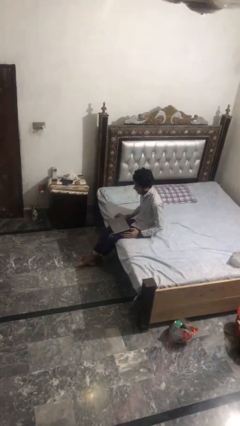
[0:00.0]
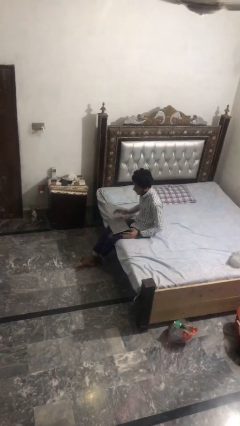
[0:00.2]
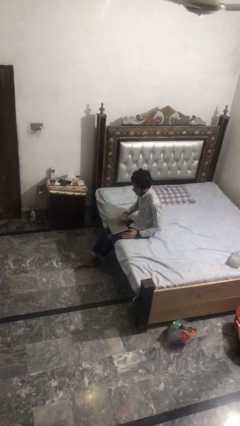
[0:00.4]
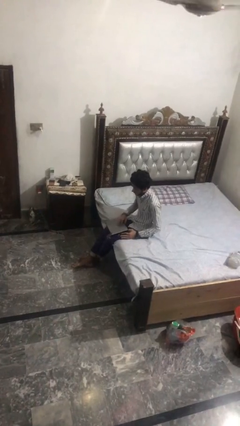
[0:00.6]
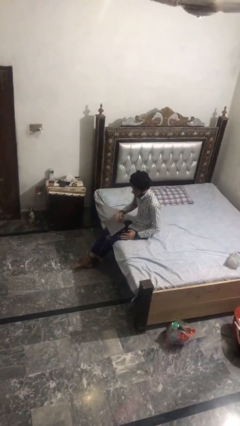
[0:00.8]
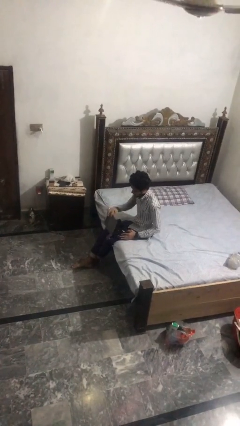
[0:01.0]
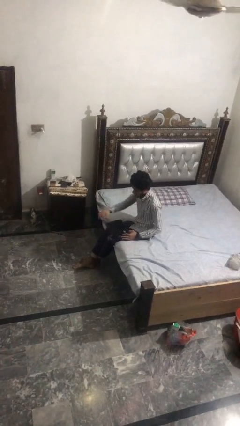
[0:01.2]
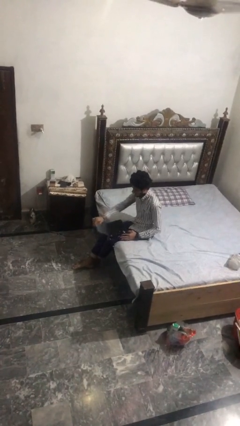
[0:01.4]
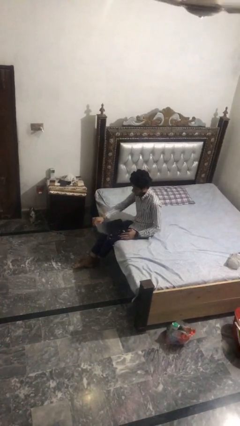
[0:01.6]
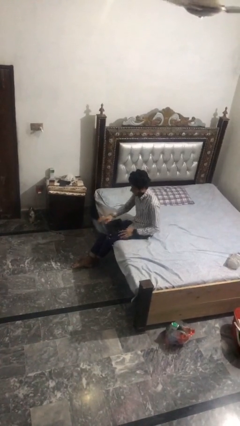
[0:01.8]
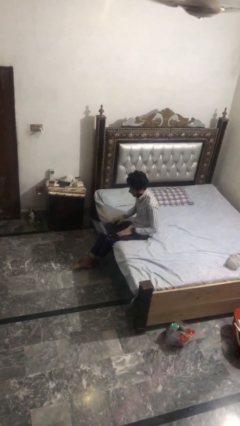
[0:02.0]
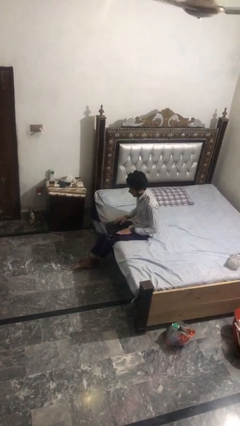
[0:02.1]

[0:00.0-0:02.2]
person opens laptop

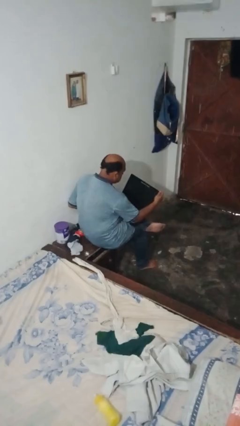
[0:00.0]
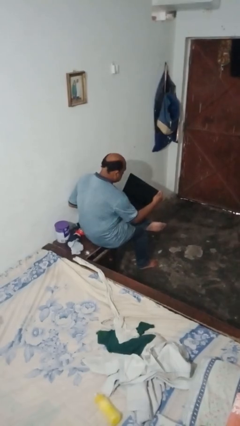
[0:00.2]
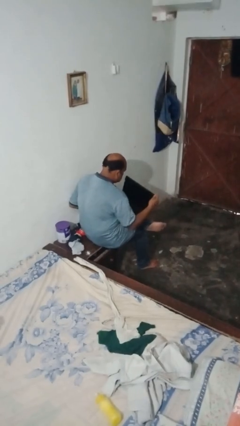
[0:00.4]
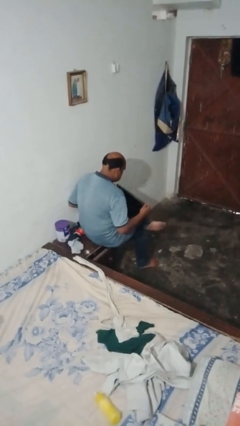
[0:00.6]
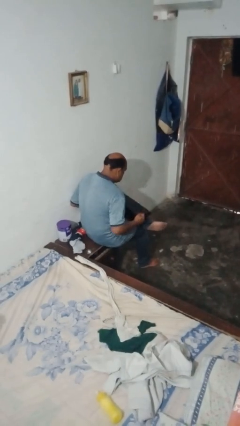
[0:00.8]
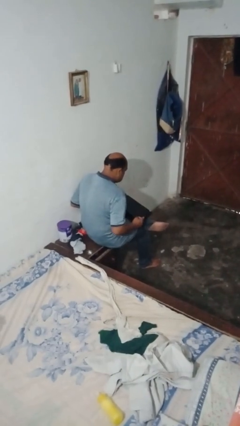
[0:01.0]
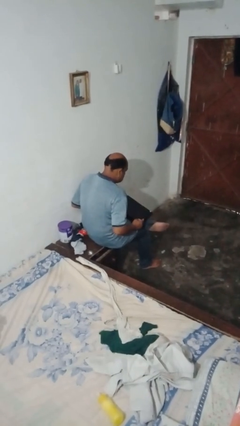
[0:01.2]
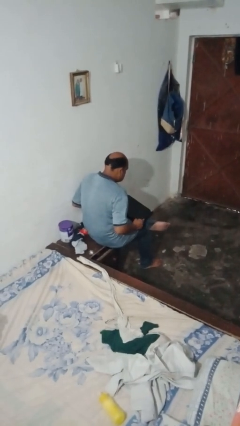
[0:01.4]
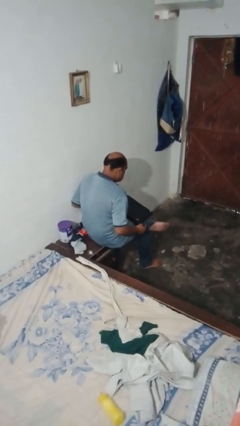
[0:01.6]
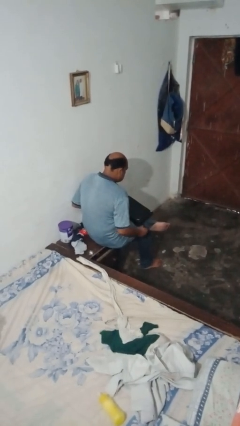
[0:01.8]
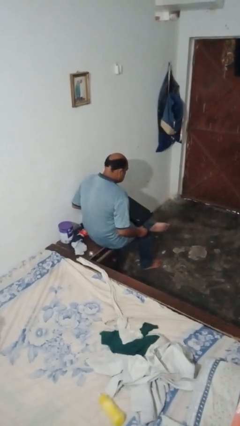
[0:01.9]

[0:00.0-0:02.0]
person closes laptop

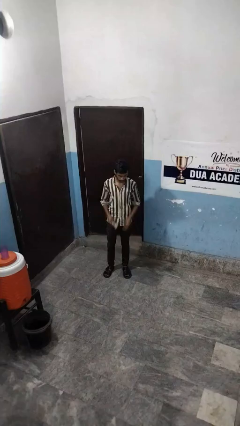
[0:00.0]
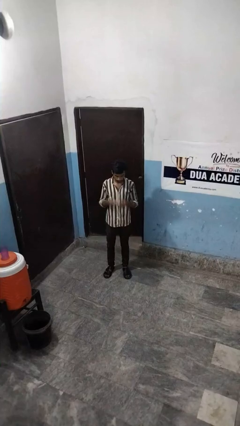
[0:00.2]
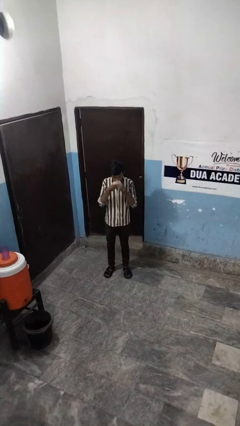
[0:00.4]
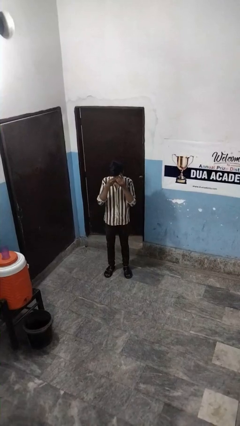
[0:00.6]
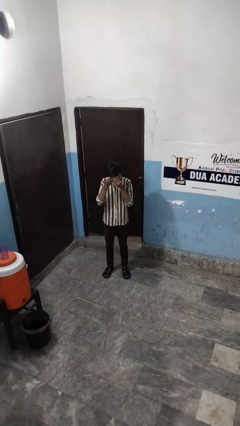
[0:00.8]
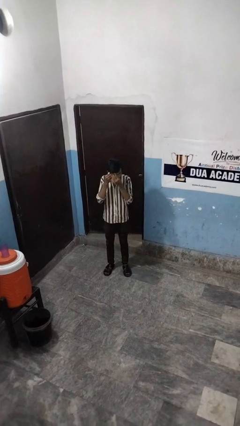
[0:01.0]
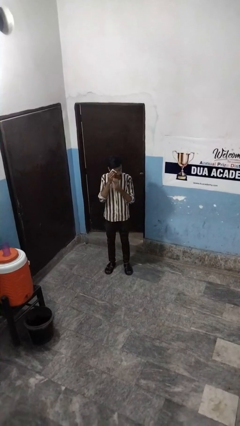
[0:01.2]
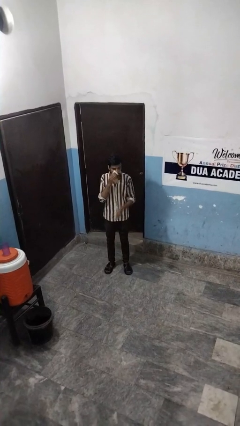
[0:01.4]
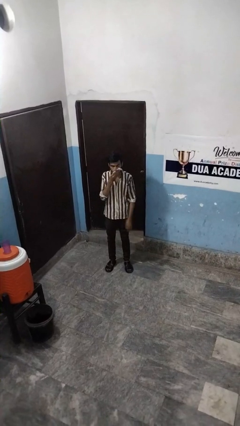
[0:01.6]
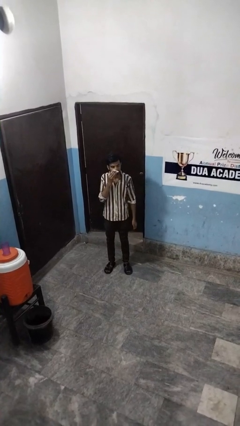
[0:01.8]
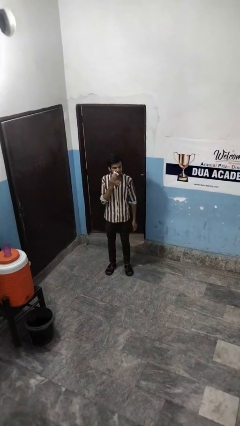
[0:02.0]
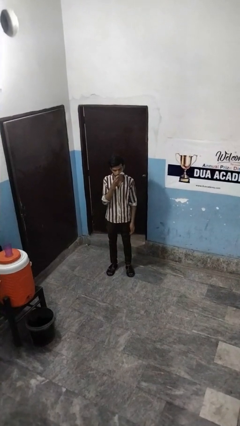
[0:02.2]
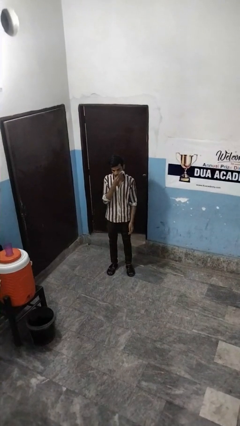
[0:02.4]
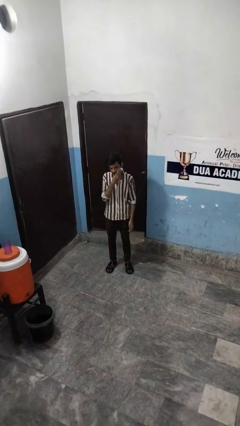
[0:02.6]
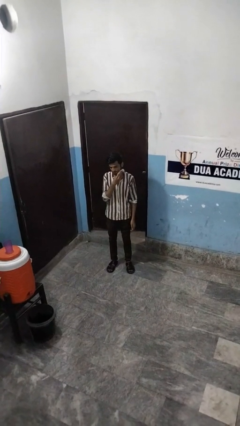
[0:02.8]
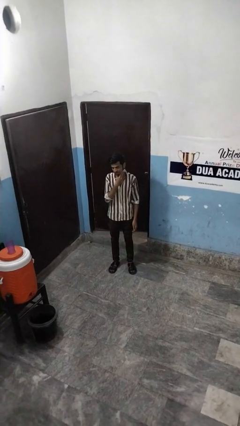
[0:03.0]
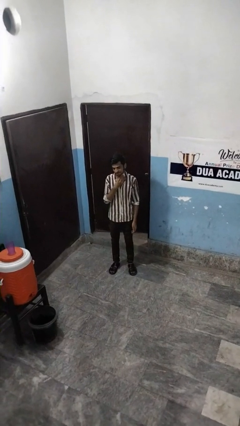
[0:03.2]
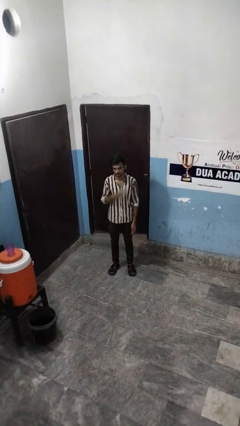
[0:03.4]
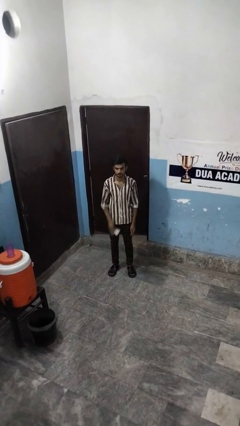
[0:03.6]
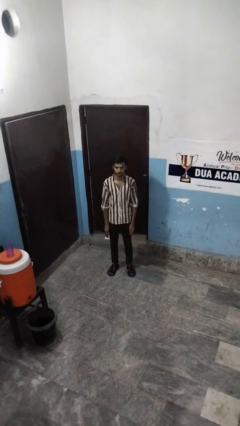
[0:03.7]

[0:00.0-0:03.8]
person wipes mouth with napkin

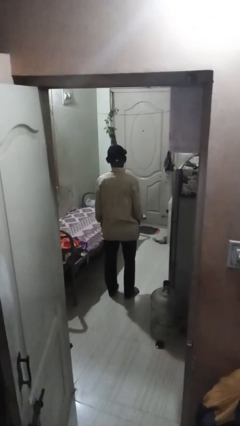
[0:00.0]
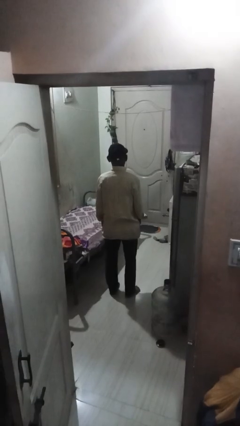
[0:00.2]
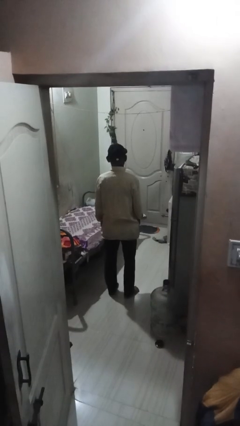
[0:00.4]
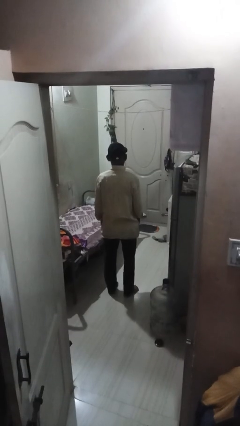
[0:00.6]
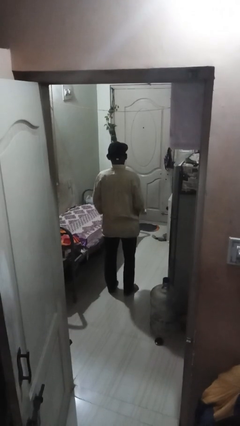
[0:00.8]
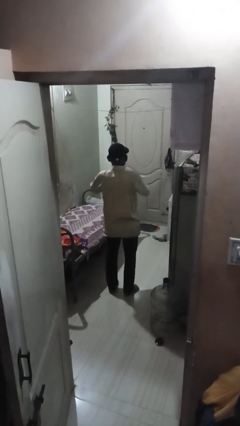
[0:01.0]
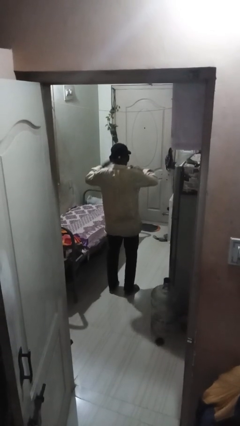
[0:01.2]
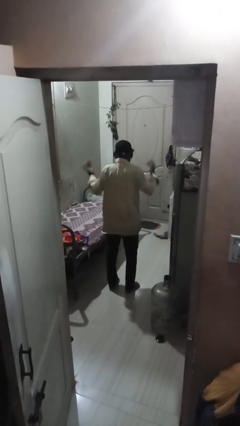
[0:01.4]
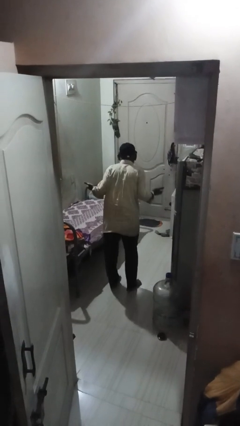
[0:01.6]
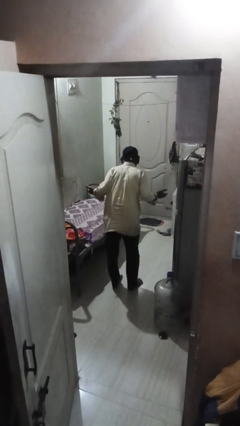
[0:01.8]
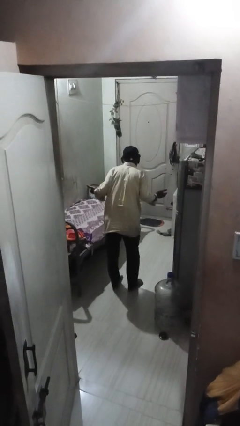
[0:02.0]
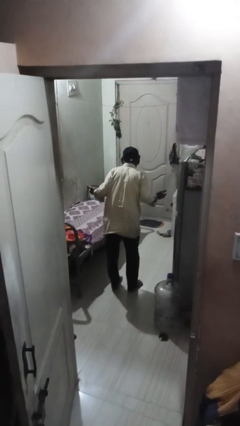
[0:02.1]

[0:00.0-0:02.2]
person shrugs

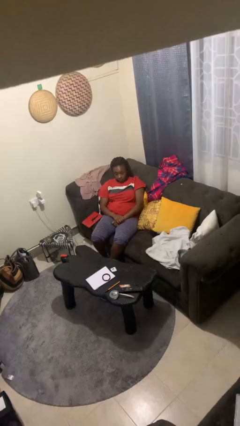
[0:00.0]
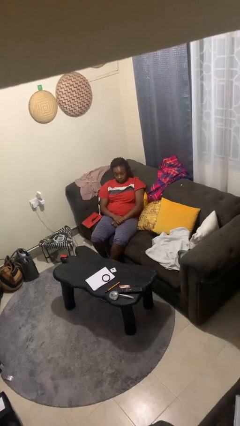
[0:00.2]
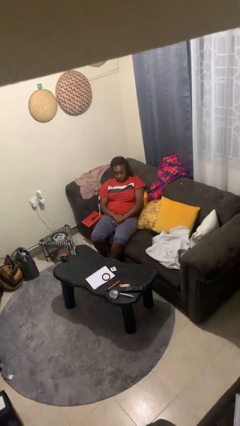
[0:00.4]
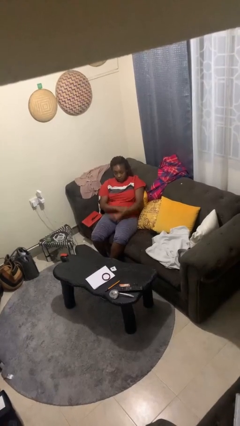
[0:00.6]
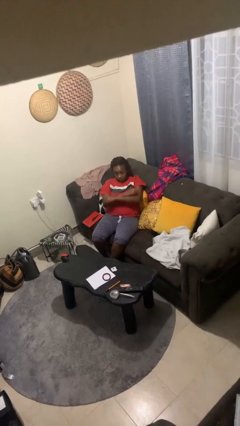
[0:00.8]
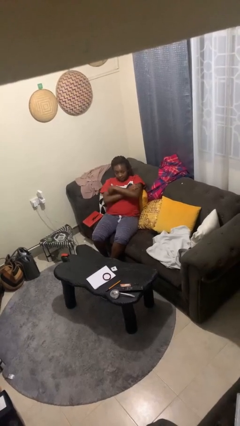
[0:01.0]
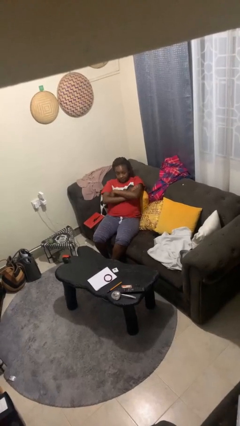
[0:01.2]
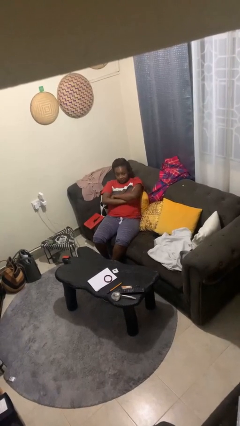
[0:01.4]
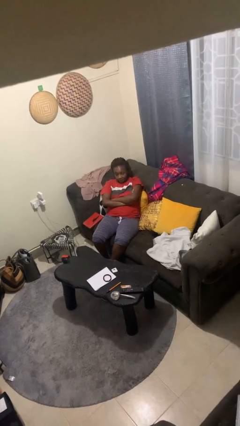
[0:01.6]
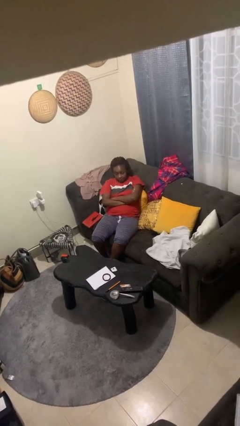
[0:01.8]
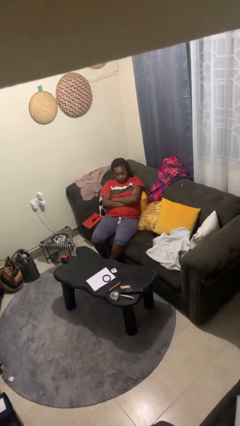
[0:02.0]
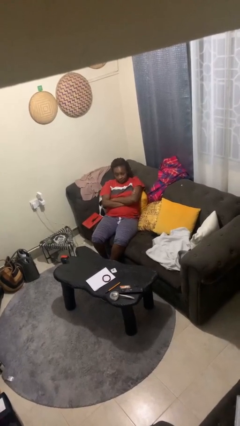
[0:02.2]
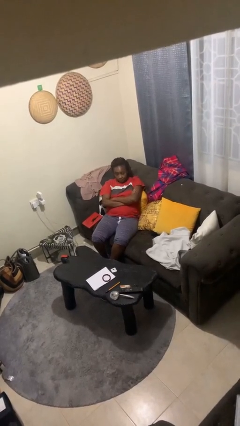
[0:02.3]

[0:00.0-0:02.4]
person crosses arms

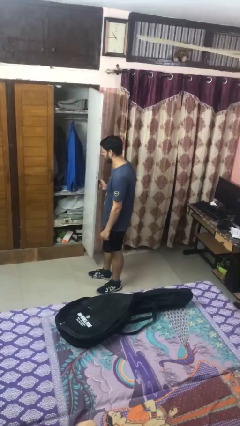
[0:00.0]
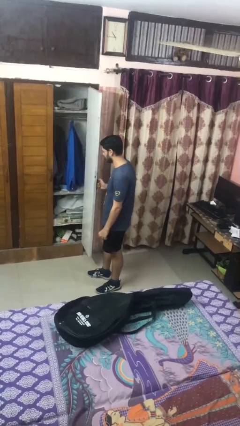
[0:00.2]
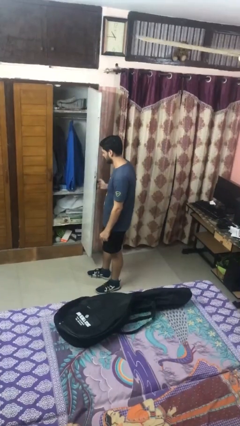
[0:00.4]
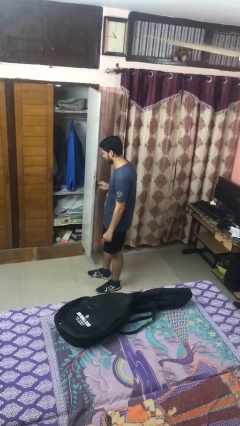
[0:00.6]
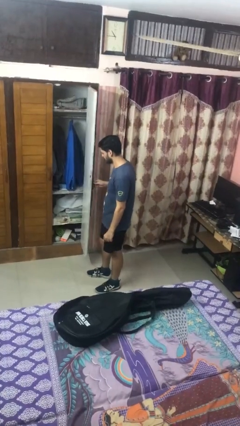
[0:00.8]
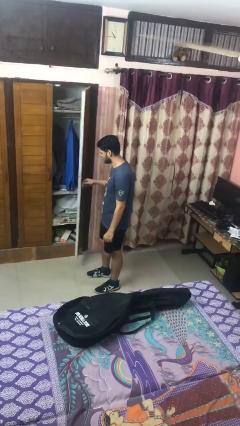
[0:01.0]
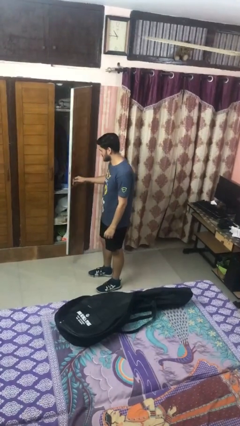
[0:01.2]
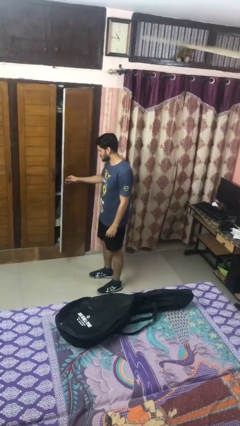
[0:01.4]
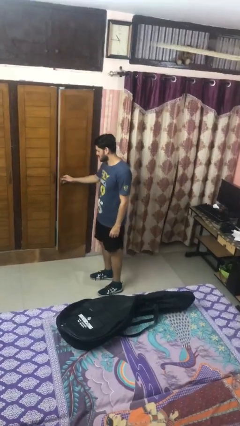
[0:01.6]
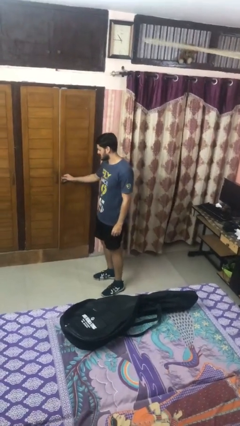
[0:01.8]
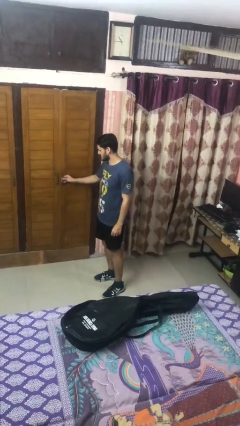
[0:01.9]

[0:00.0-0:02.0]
person closes closet door

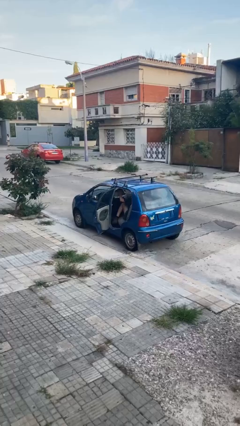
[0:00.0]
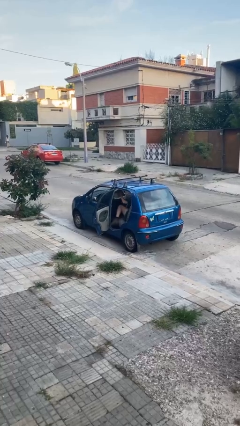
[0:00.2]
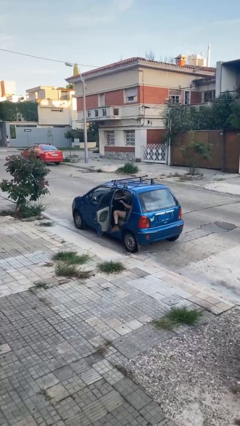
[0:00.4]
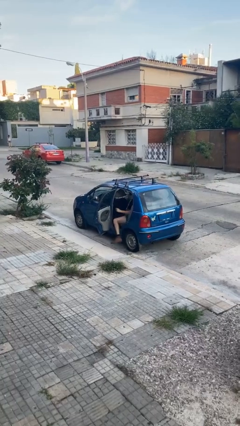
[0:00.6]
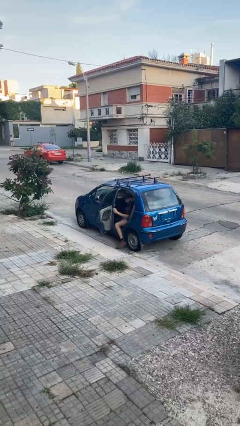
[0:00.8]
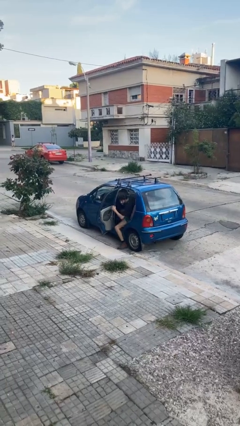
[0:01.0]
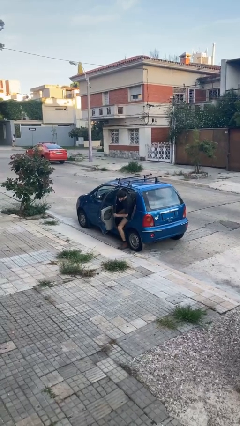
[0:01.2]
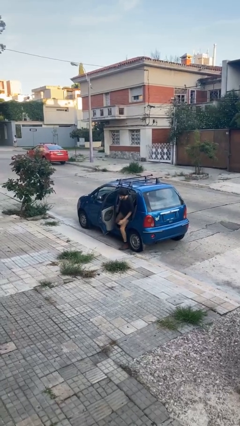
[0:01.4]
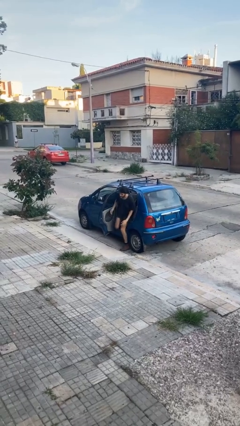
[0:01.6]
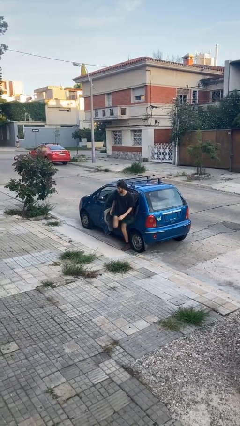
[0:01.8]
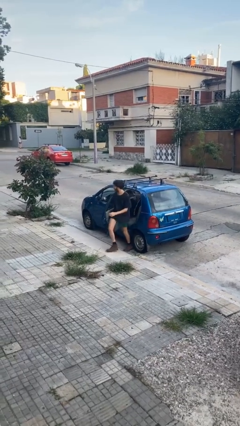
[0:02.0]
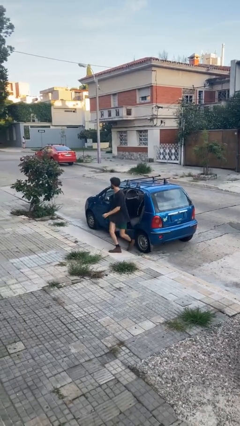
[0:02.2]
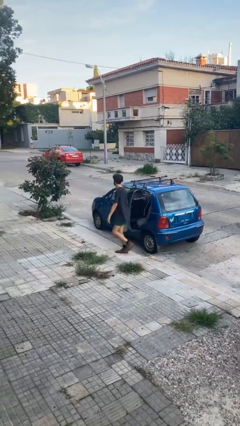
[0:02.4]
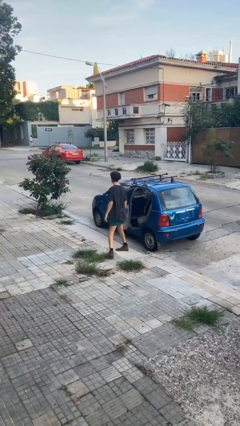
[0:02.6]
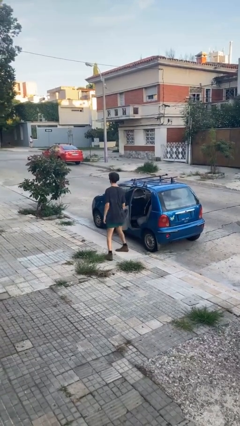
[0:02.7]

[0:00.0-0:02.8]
person exits car
